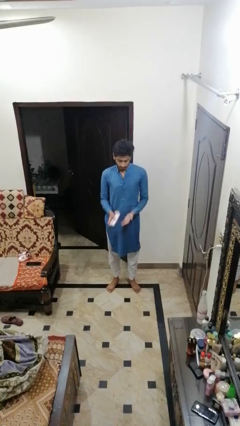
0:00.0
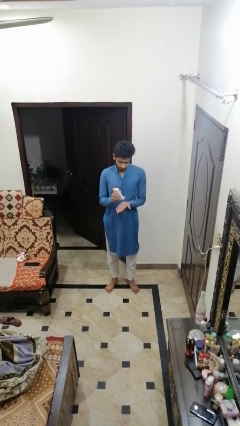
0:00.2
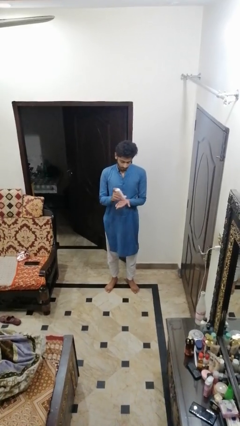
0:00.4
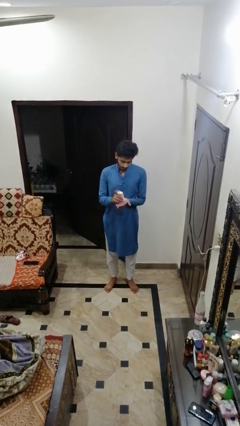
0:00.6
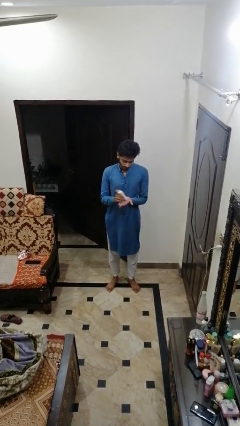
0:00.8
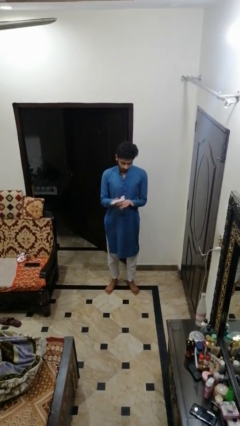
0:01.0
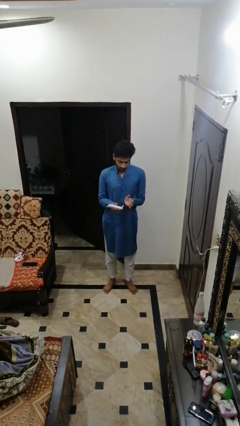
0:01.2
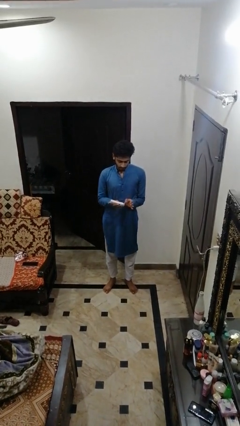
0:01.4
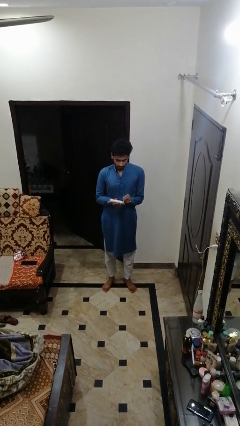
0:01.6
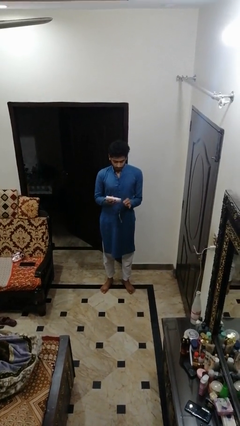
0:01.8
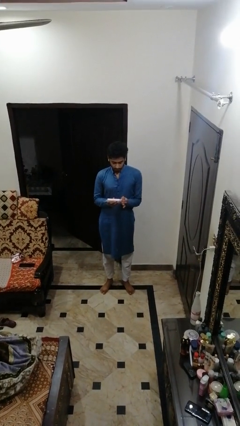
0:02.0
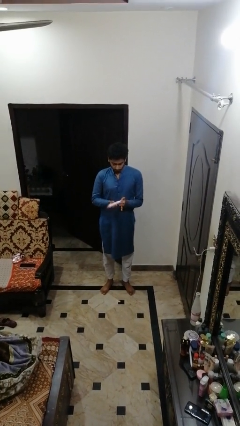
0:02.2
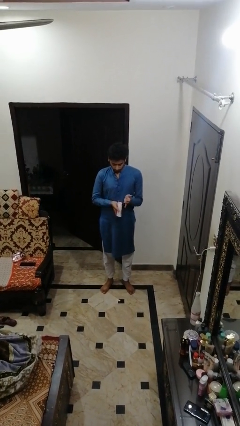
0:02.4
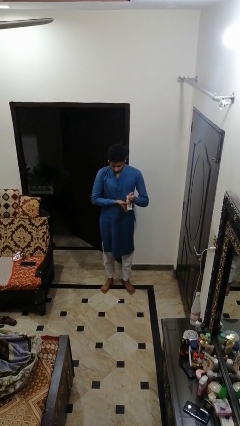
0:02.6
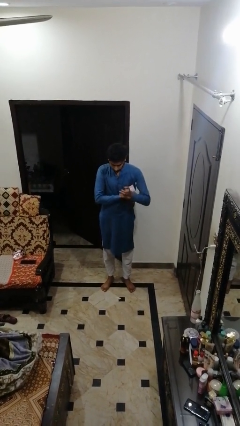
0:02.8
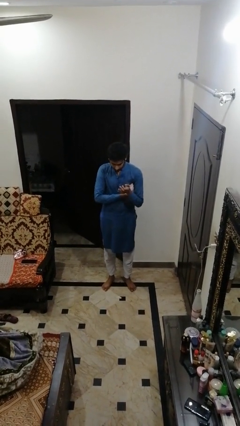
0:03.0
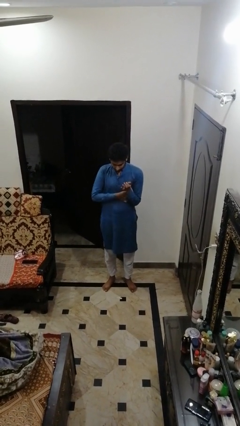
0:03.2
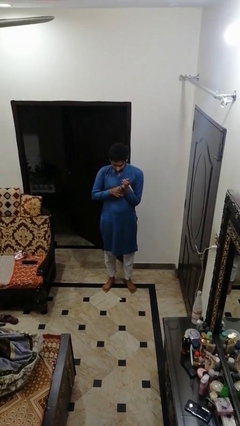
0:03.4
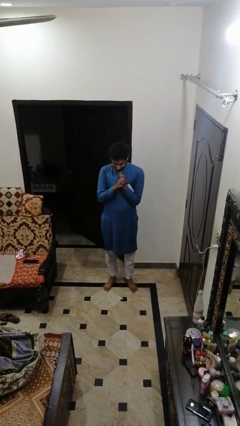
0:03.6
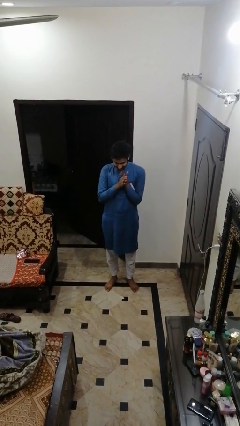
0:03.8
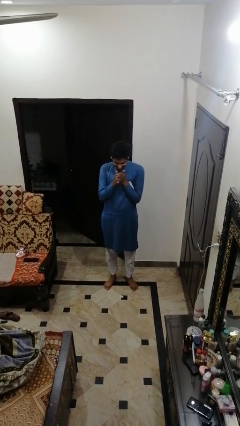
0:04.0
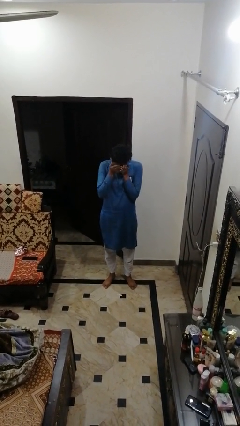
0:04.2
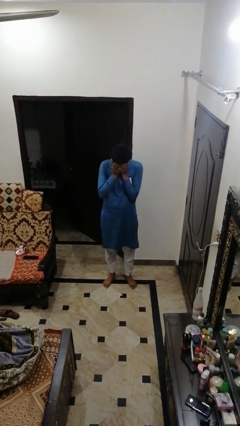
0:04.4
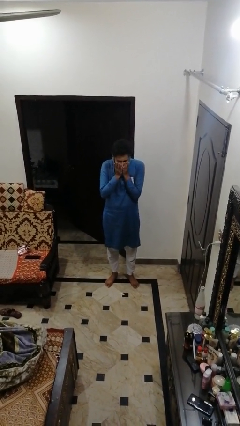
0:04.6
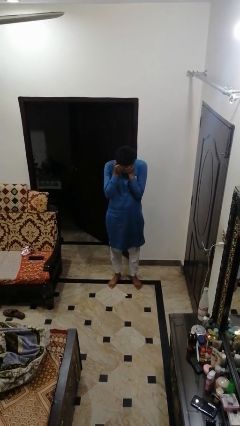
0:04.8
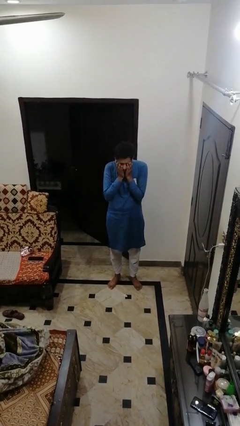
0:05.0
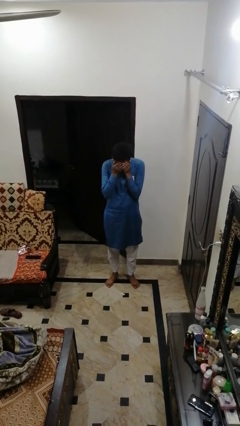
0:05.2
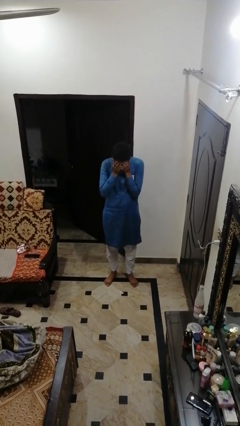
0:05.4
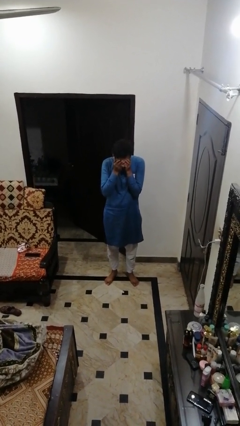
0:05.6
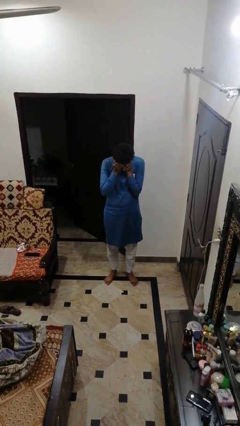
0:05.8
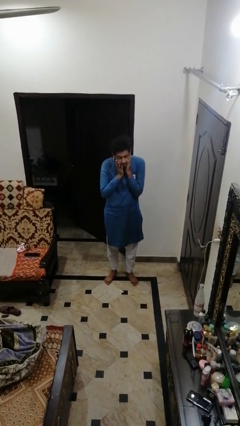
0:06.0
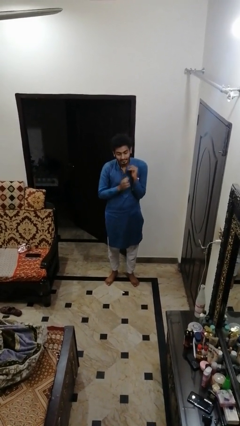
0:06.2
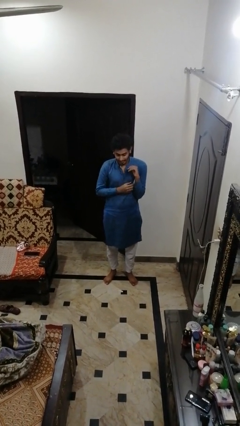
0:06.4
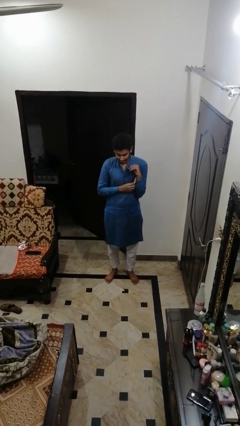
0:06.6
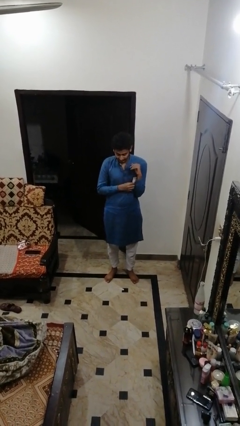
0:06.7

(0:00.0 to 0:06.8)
person applies facial moisturizer

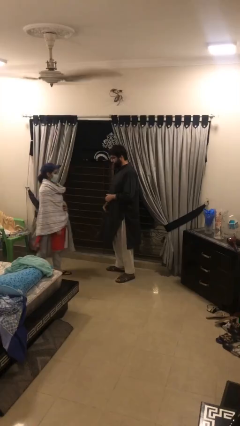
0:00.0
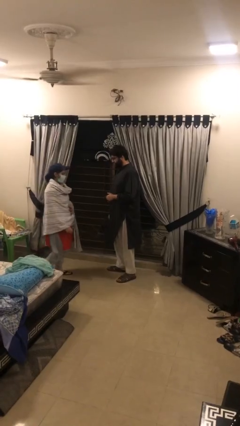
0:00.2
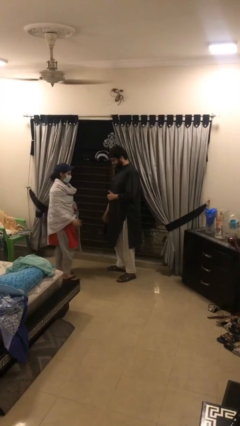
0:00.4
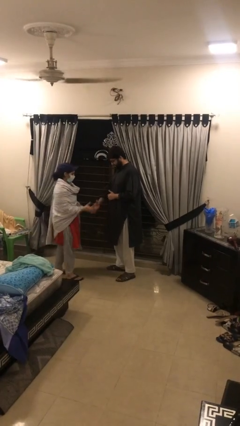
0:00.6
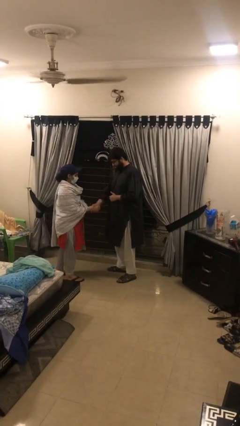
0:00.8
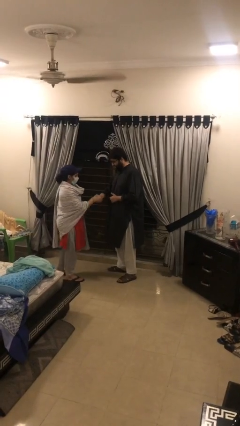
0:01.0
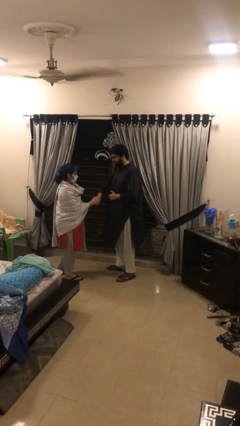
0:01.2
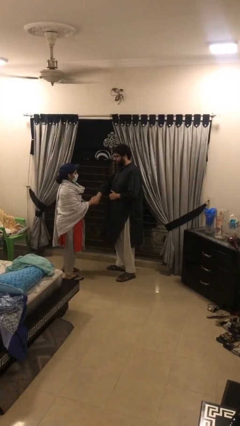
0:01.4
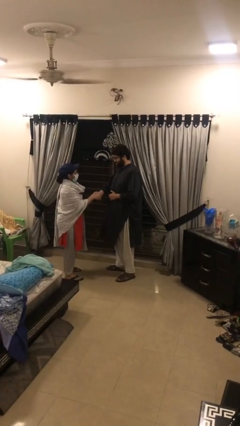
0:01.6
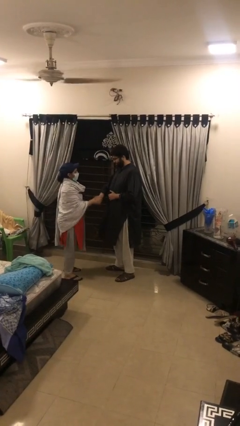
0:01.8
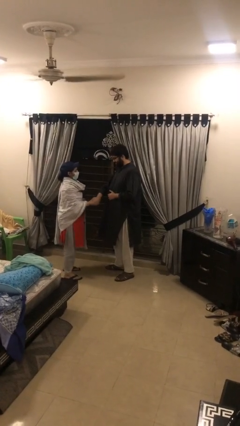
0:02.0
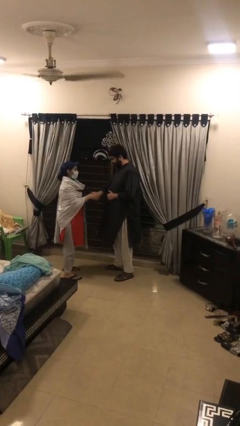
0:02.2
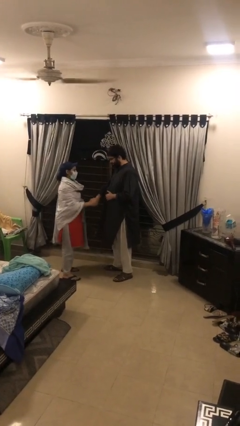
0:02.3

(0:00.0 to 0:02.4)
person shakes hand

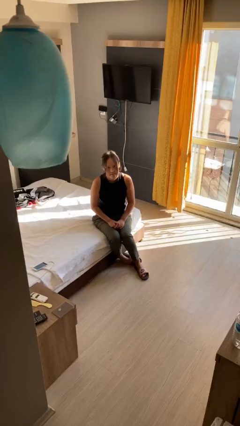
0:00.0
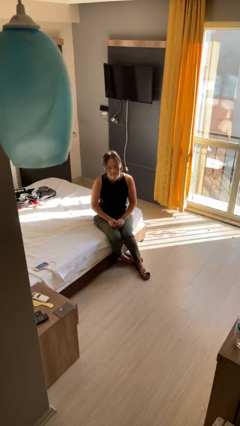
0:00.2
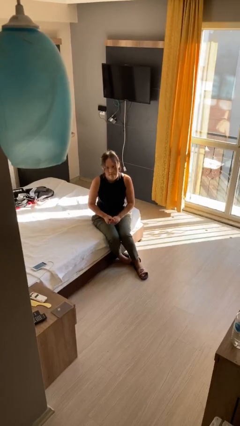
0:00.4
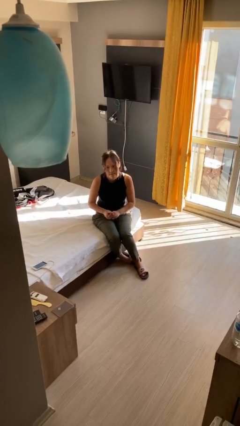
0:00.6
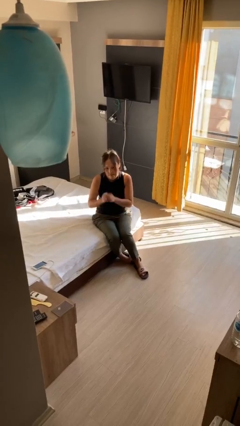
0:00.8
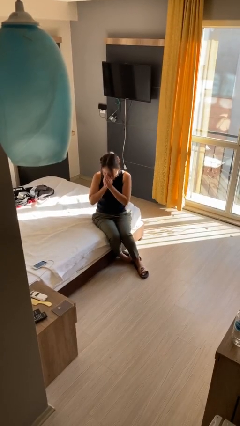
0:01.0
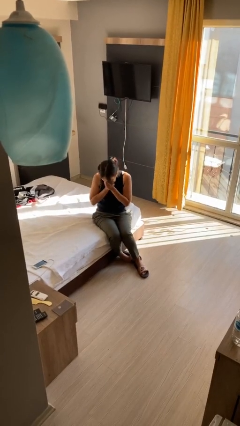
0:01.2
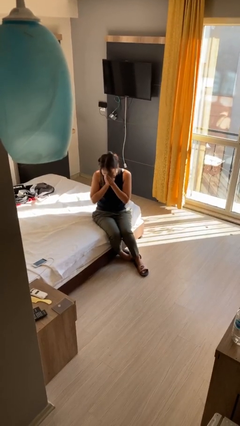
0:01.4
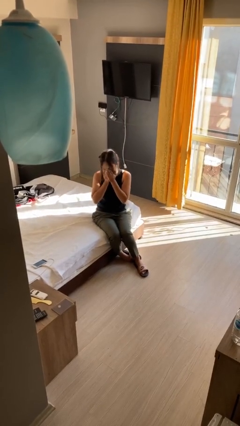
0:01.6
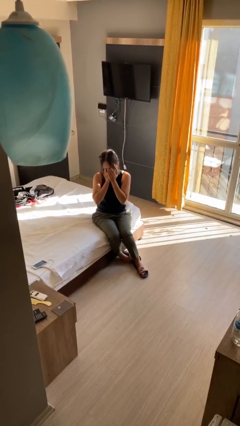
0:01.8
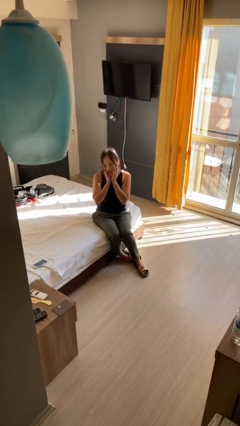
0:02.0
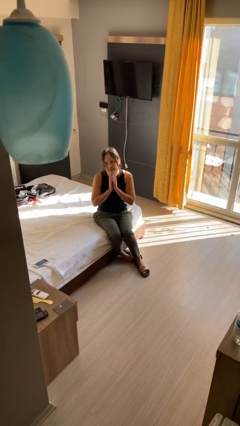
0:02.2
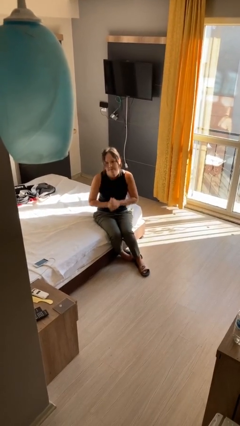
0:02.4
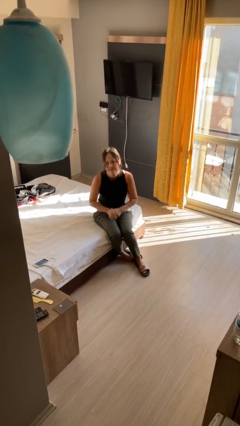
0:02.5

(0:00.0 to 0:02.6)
person sneezes into hand

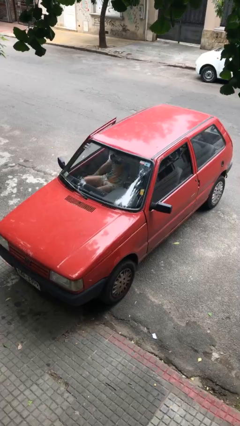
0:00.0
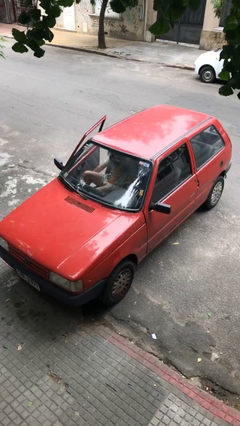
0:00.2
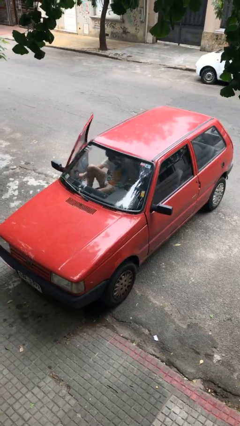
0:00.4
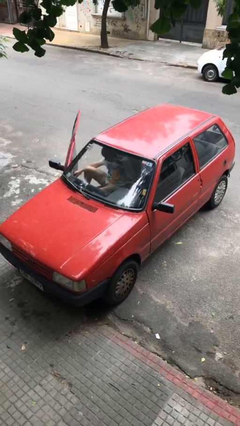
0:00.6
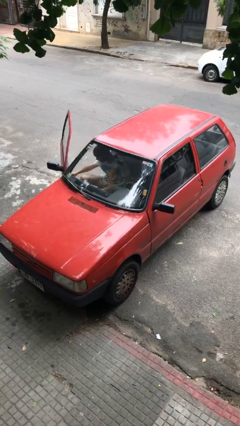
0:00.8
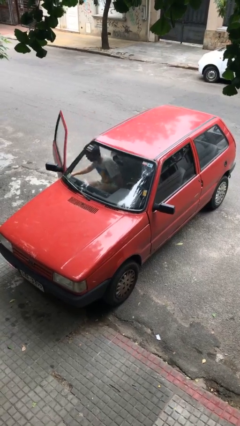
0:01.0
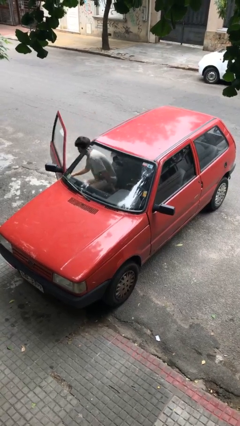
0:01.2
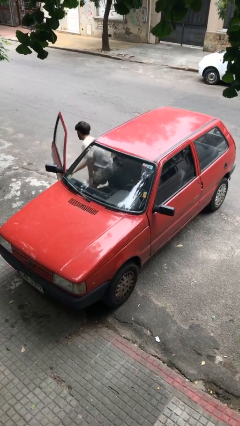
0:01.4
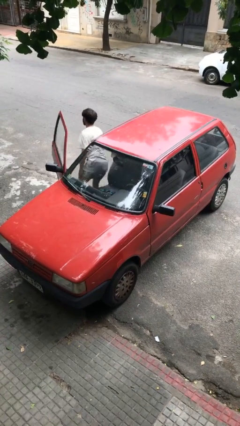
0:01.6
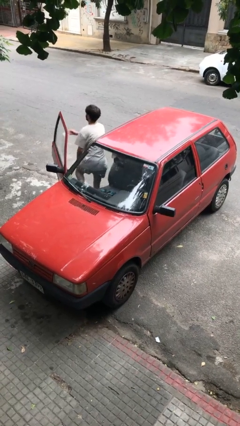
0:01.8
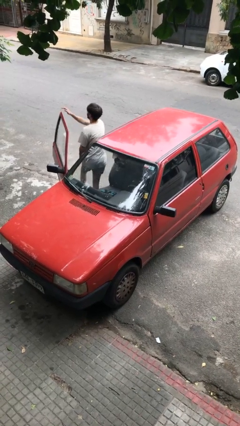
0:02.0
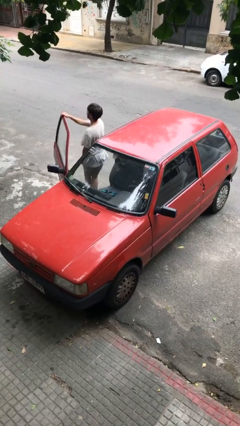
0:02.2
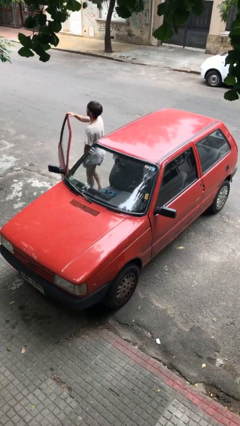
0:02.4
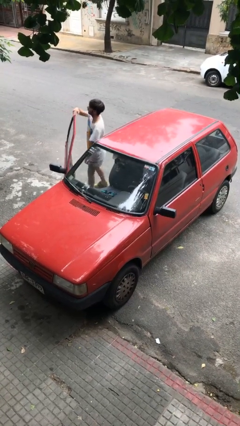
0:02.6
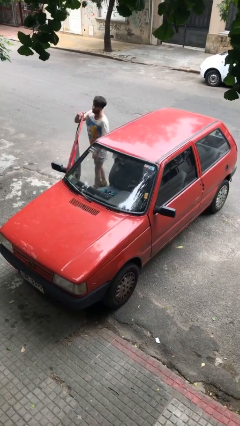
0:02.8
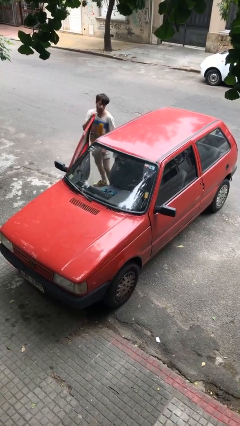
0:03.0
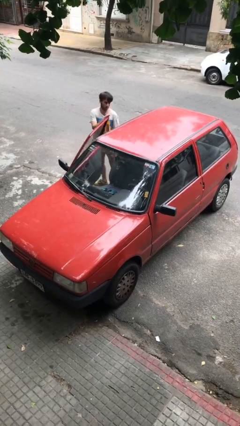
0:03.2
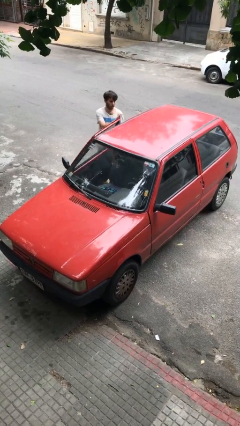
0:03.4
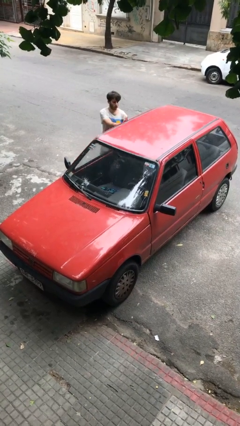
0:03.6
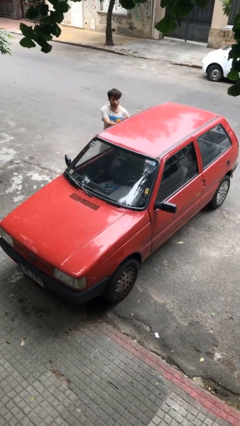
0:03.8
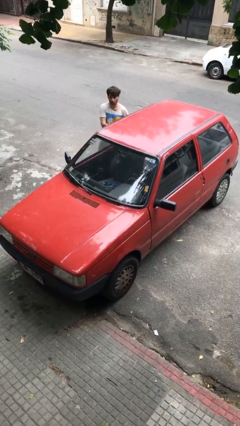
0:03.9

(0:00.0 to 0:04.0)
car drops off person

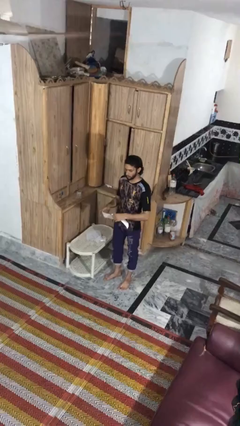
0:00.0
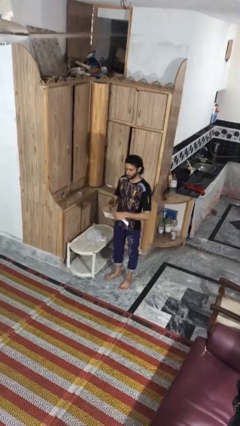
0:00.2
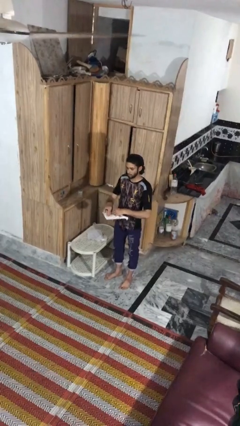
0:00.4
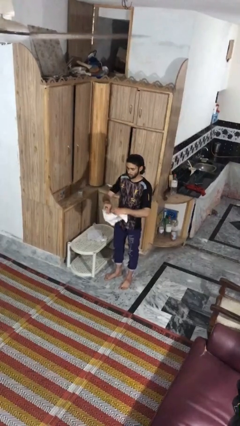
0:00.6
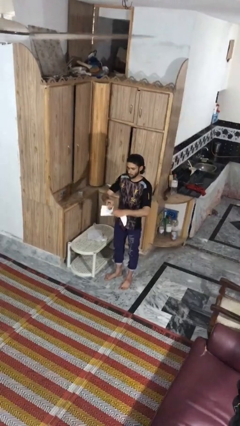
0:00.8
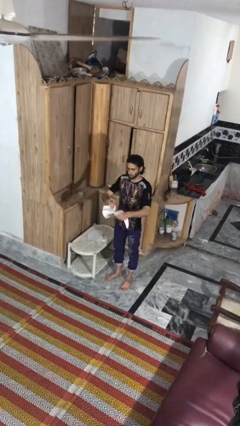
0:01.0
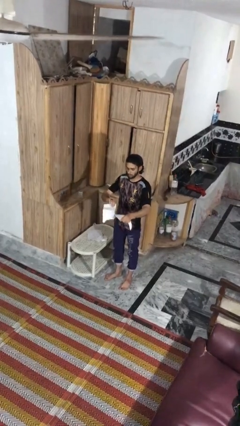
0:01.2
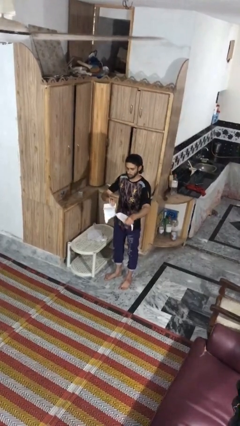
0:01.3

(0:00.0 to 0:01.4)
person tears paper

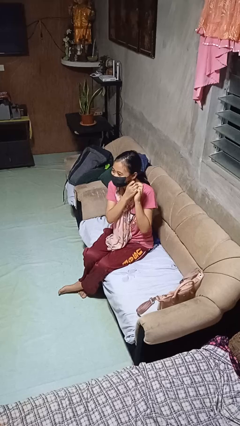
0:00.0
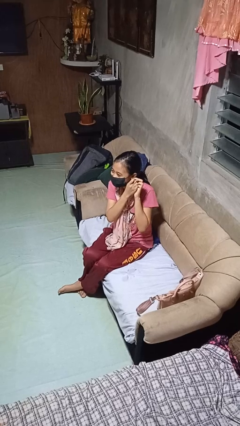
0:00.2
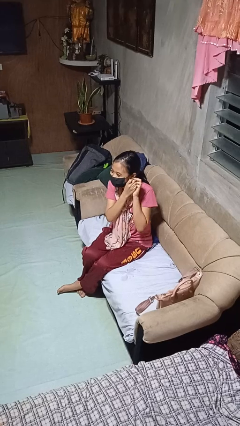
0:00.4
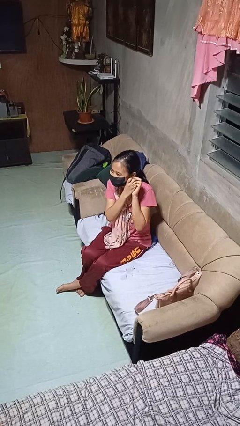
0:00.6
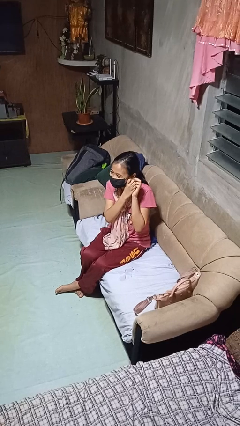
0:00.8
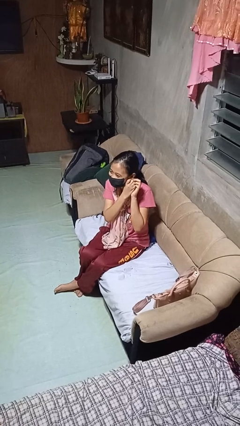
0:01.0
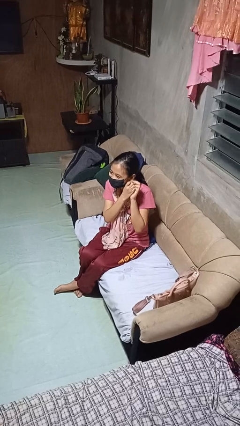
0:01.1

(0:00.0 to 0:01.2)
person takes off earrings
